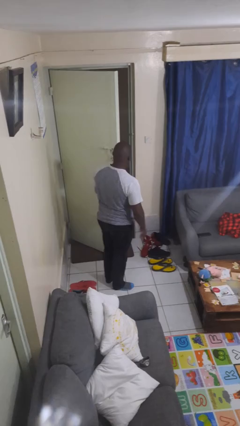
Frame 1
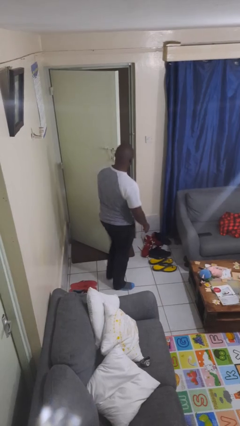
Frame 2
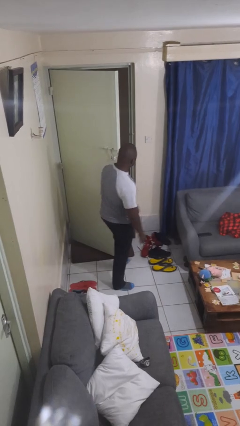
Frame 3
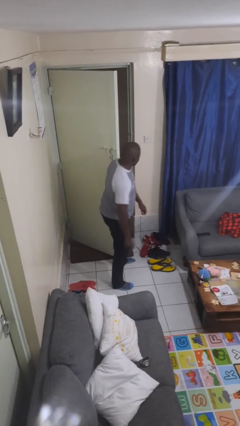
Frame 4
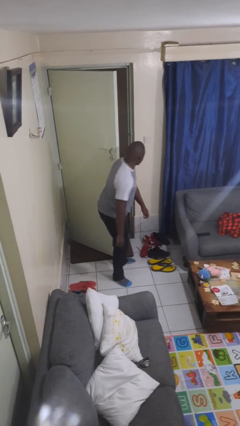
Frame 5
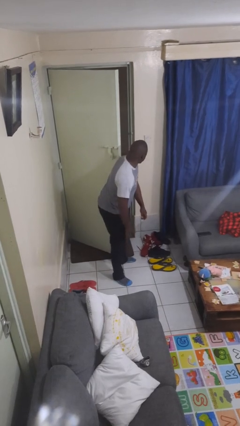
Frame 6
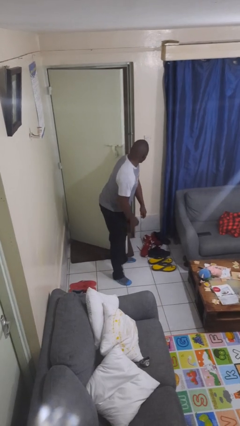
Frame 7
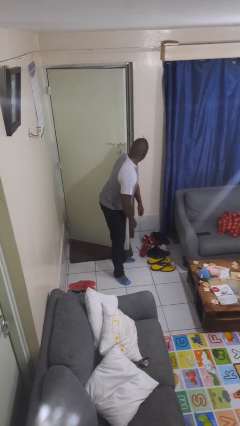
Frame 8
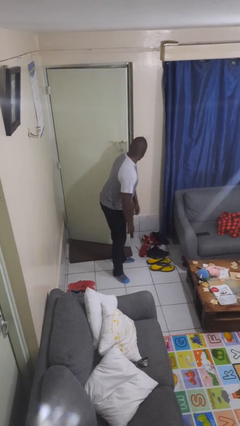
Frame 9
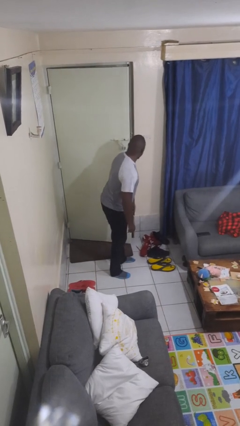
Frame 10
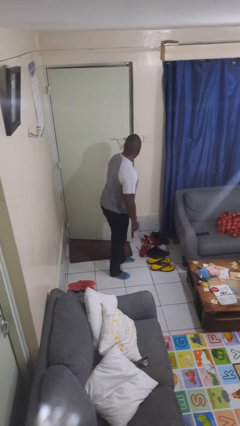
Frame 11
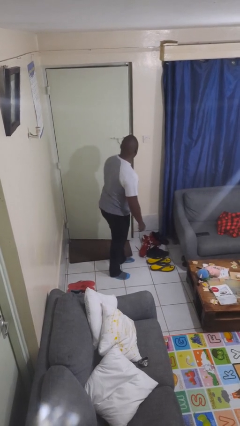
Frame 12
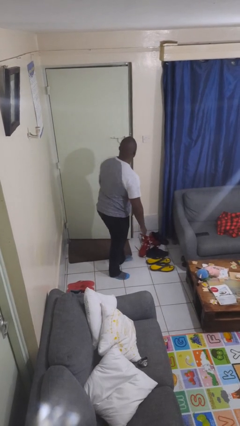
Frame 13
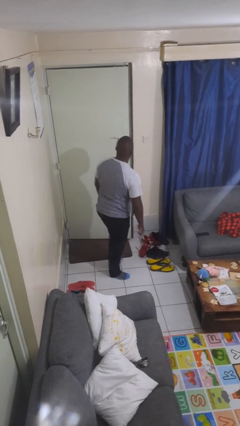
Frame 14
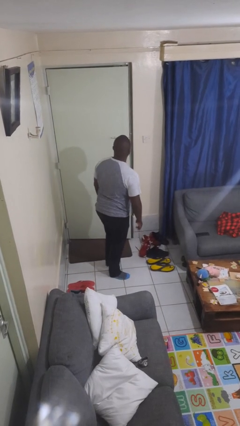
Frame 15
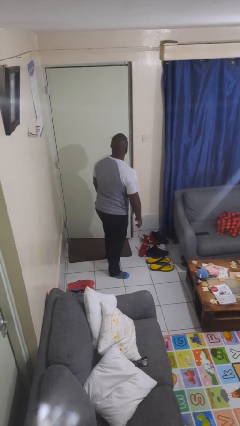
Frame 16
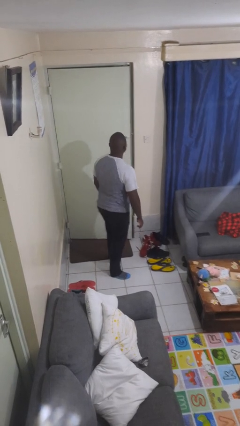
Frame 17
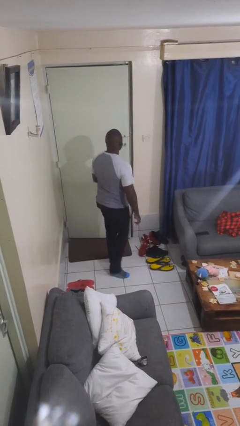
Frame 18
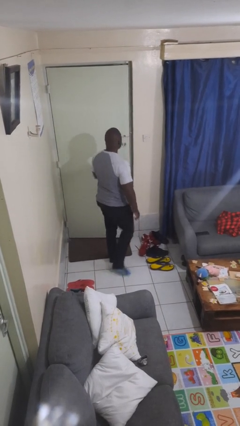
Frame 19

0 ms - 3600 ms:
person closes door with hip

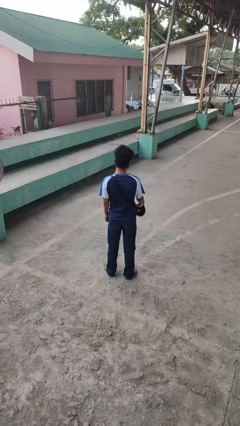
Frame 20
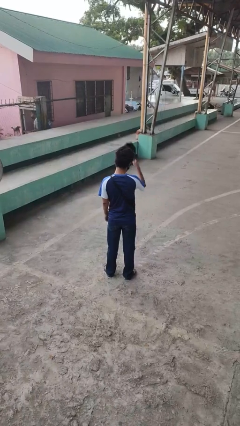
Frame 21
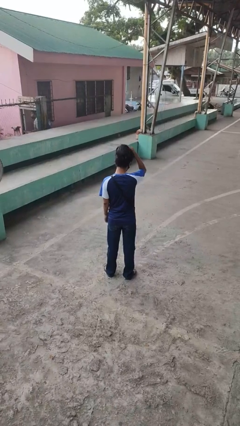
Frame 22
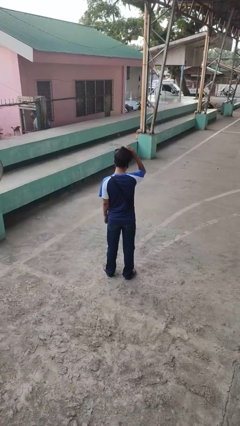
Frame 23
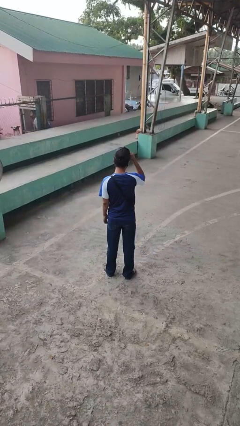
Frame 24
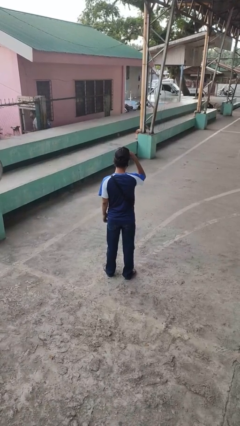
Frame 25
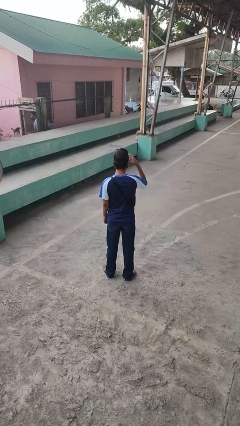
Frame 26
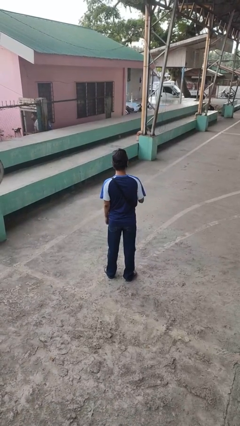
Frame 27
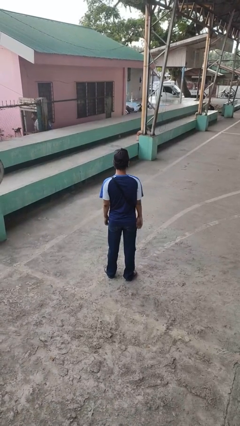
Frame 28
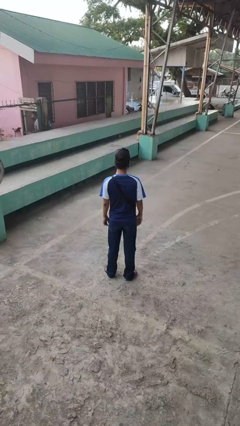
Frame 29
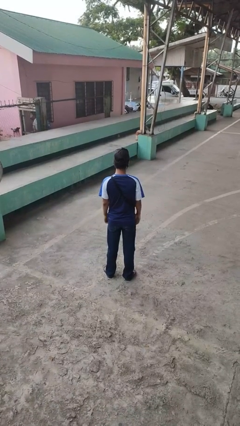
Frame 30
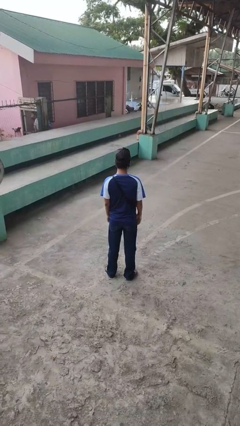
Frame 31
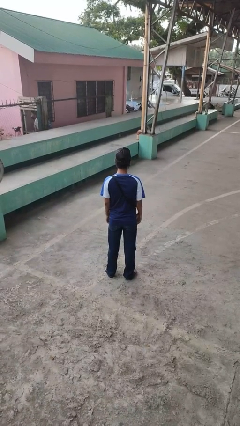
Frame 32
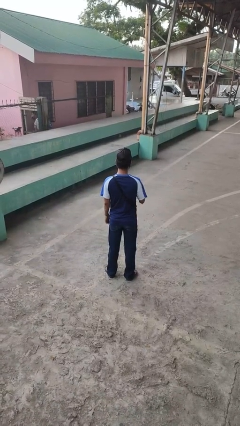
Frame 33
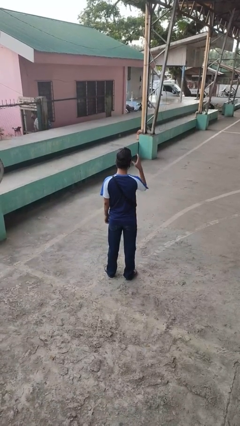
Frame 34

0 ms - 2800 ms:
person puts on hat

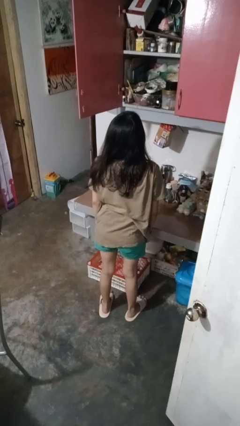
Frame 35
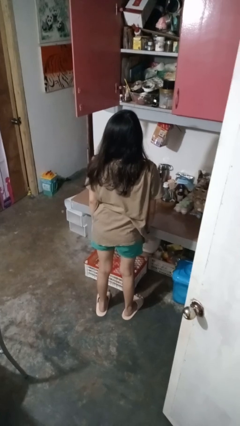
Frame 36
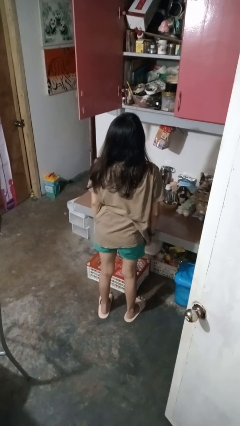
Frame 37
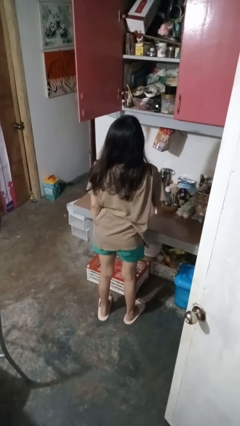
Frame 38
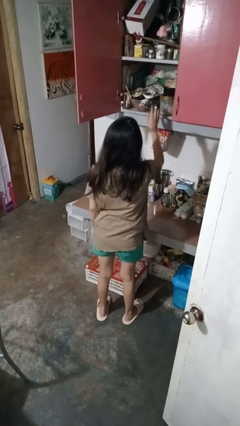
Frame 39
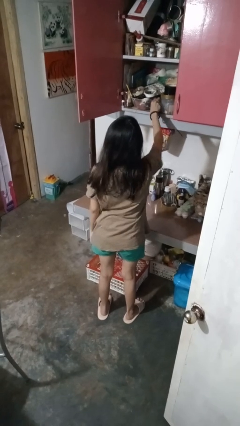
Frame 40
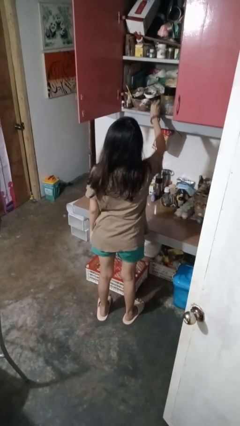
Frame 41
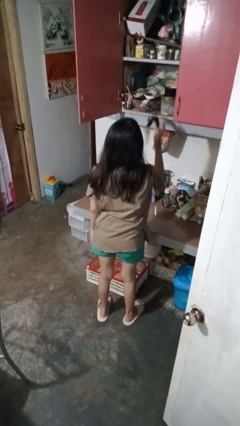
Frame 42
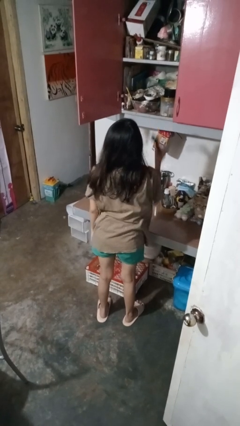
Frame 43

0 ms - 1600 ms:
person takes object from cabinet

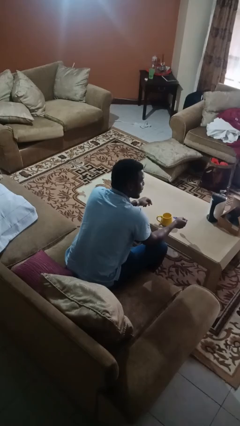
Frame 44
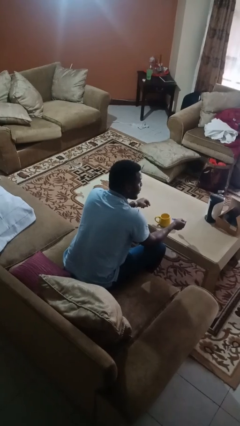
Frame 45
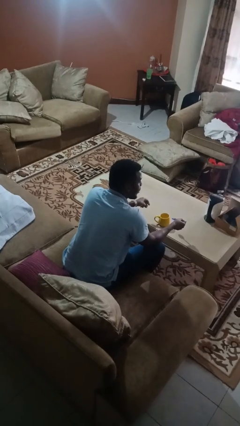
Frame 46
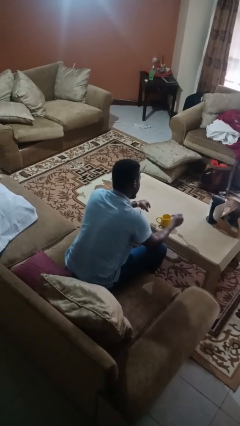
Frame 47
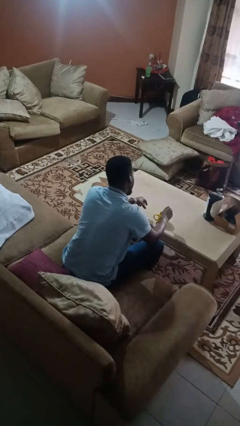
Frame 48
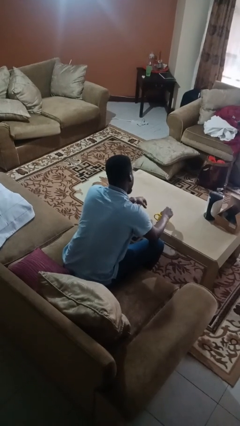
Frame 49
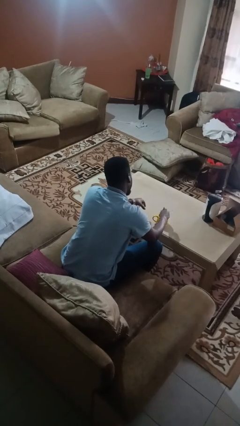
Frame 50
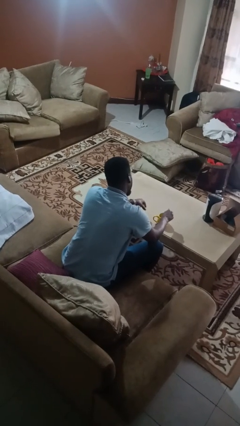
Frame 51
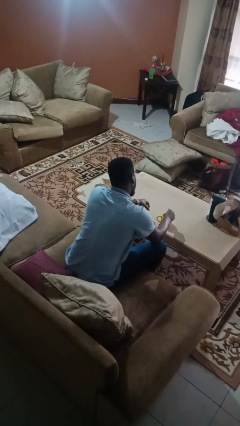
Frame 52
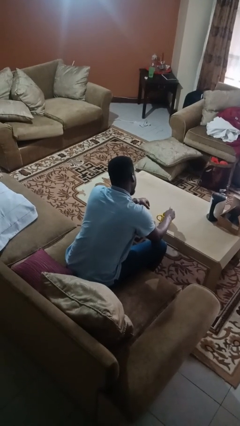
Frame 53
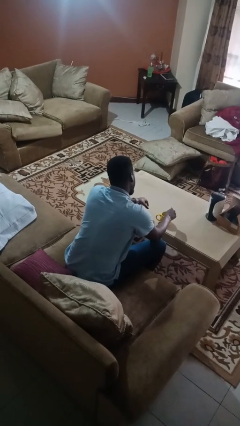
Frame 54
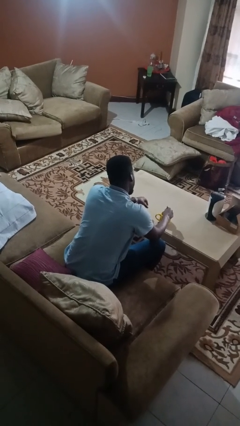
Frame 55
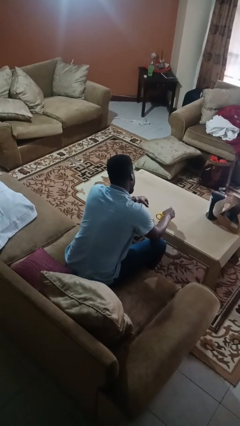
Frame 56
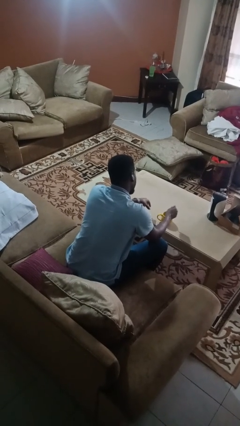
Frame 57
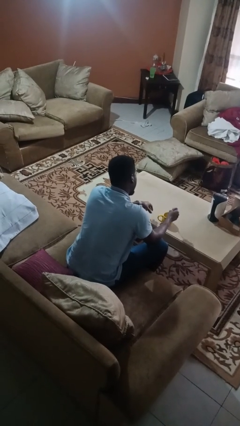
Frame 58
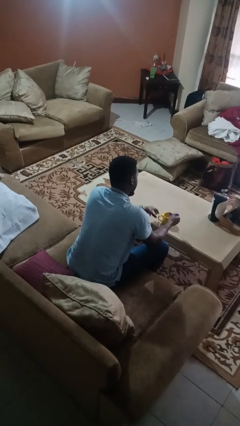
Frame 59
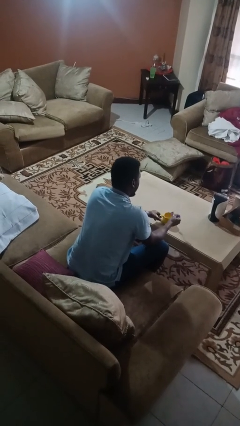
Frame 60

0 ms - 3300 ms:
person stirs mug

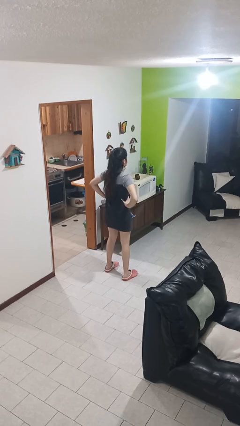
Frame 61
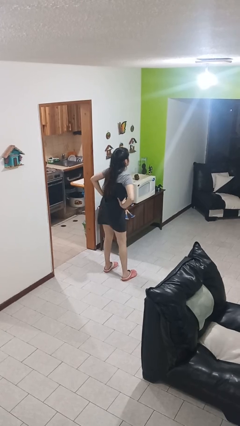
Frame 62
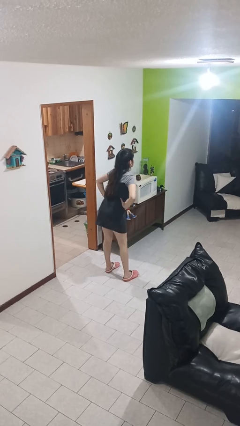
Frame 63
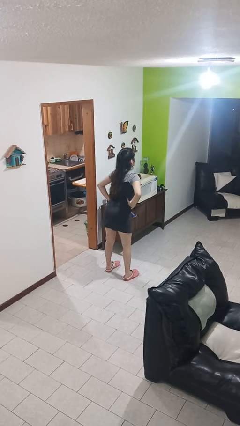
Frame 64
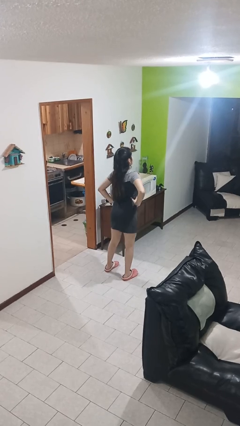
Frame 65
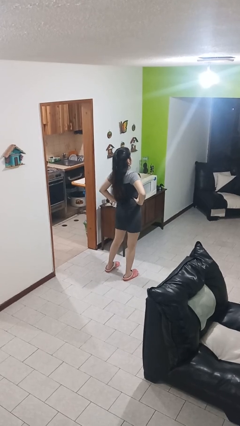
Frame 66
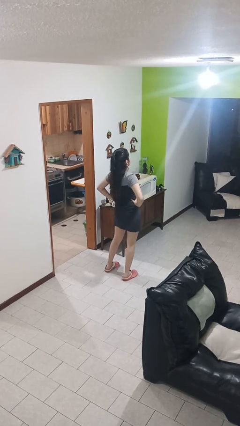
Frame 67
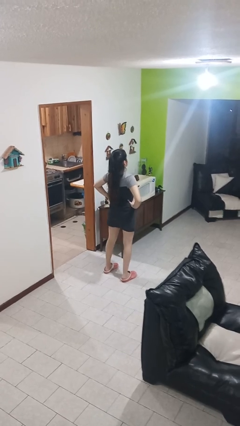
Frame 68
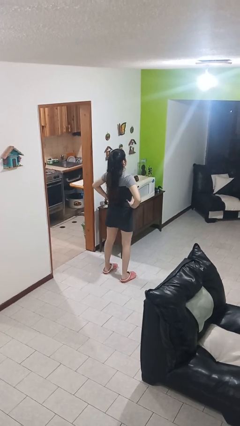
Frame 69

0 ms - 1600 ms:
person wiggles hips

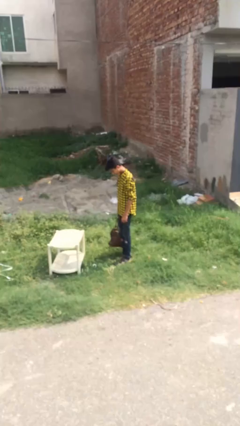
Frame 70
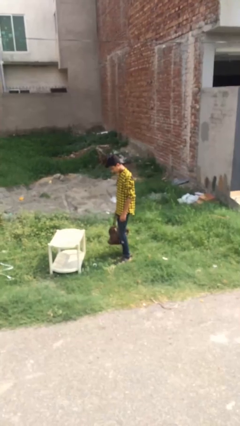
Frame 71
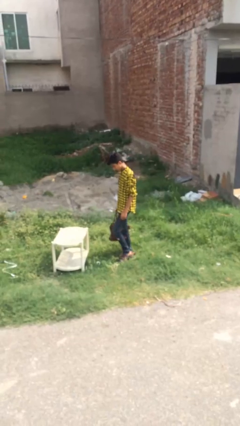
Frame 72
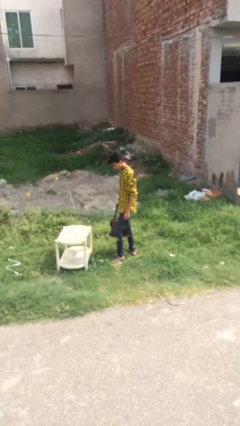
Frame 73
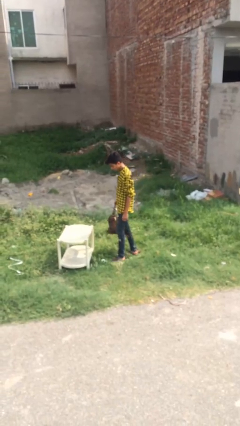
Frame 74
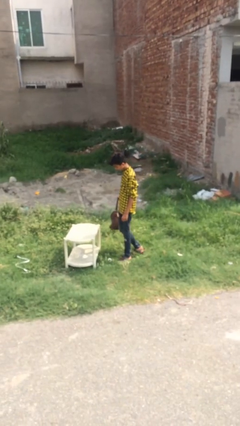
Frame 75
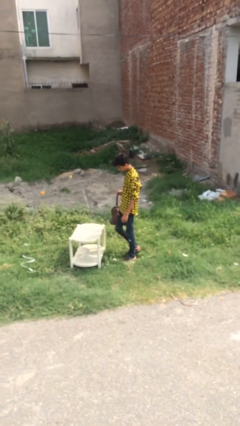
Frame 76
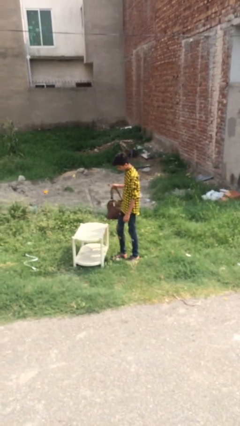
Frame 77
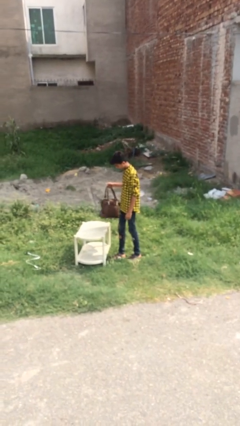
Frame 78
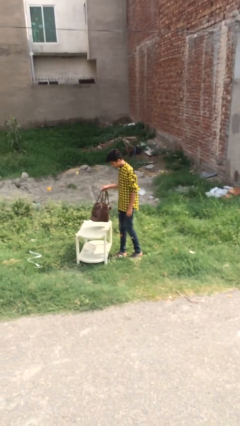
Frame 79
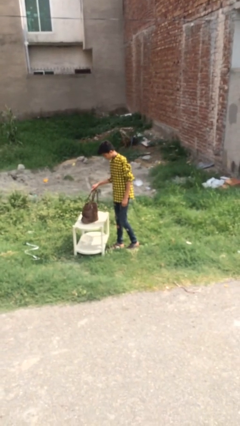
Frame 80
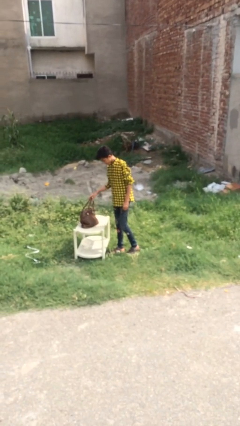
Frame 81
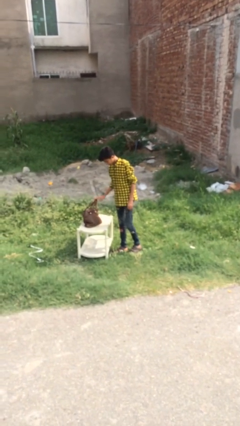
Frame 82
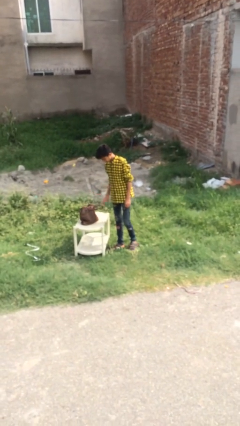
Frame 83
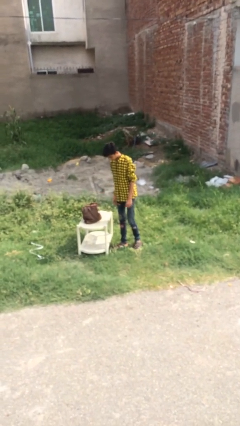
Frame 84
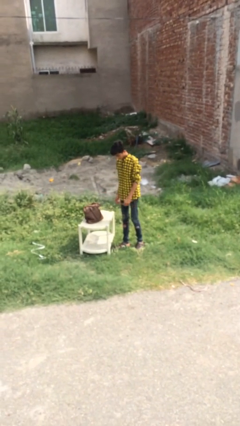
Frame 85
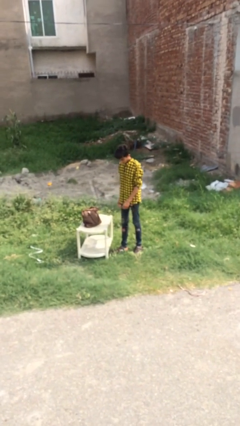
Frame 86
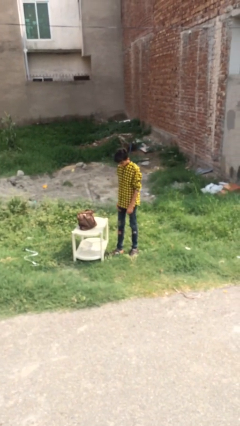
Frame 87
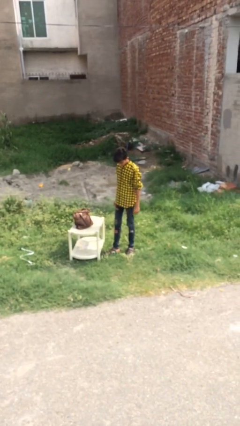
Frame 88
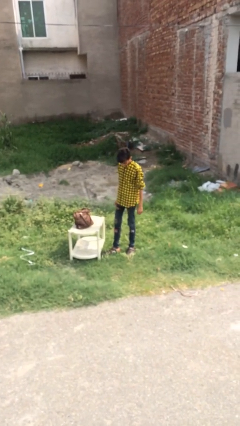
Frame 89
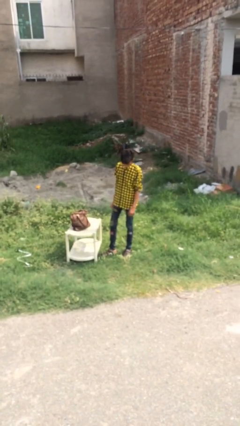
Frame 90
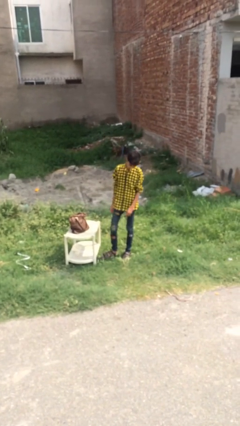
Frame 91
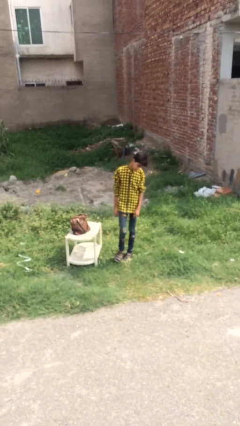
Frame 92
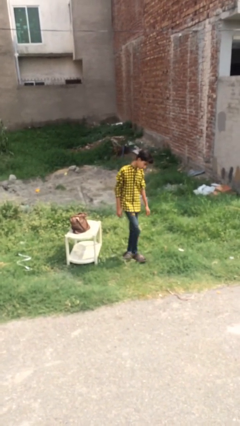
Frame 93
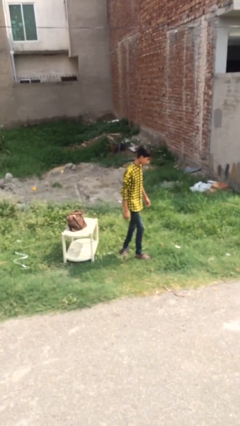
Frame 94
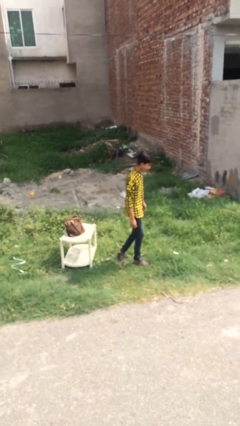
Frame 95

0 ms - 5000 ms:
person puts down object on table
